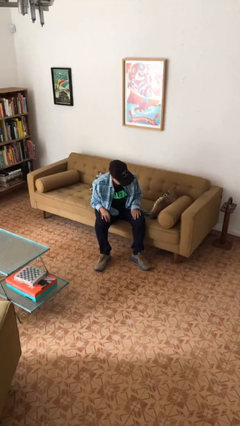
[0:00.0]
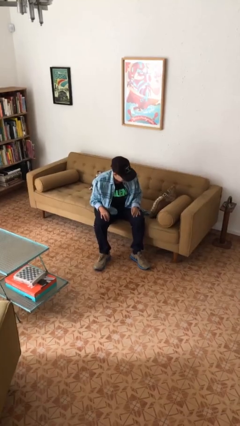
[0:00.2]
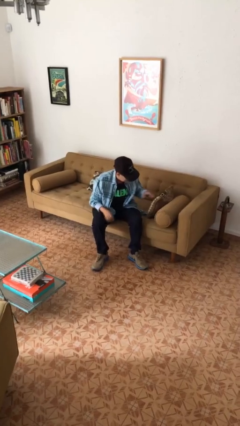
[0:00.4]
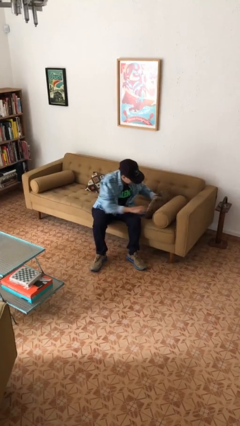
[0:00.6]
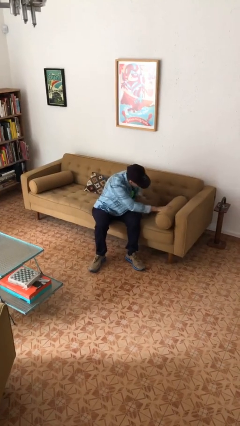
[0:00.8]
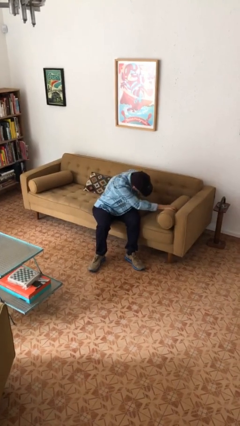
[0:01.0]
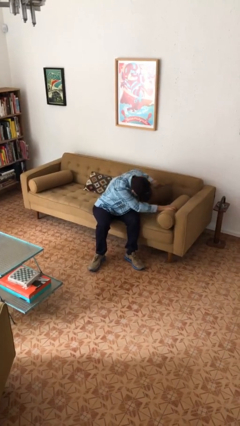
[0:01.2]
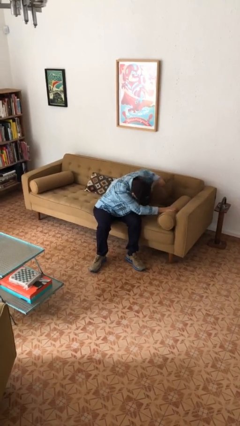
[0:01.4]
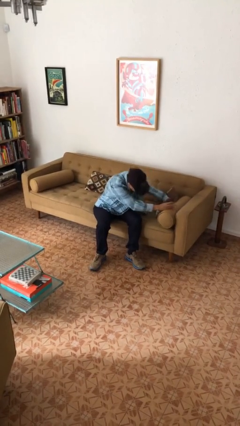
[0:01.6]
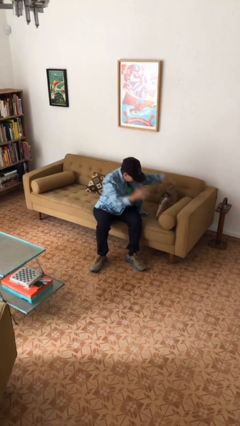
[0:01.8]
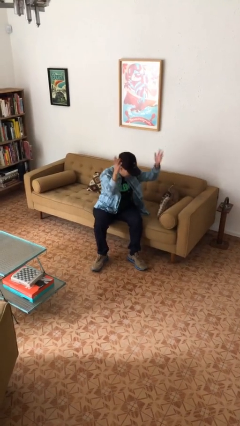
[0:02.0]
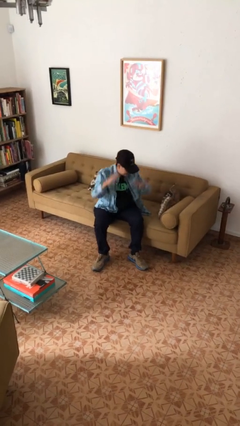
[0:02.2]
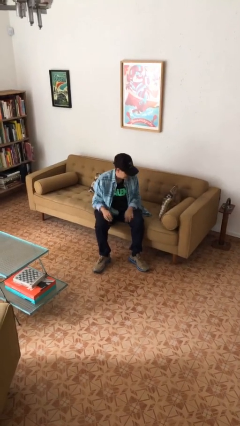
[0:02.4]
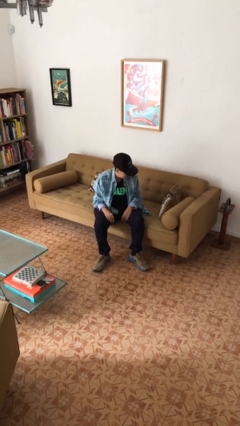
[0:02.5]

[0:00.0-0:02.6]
person searches in couch

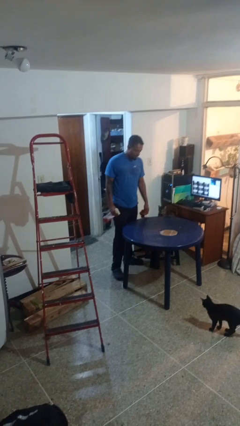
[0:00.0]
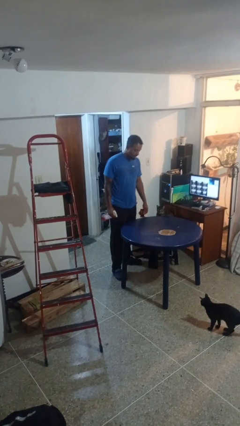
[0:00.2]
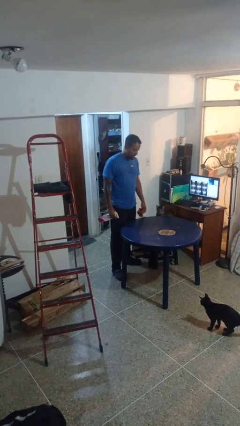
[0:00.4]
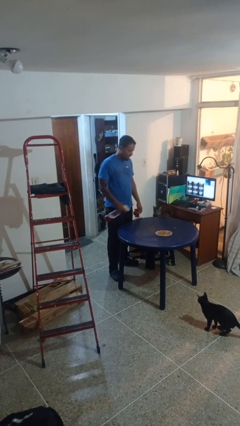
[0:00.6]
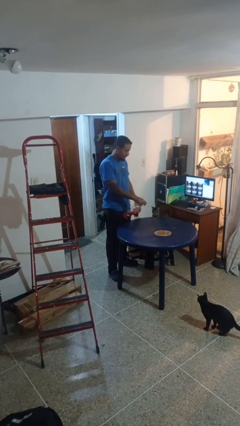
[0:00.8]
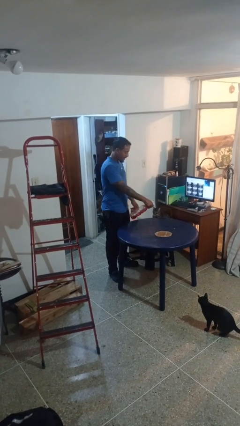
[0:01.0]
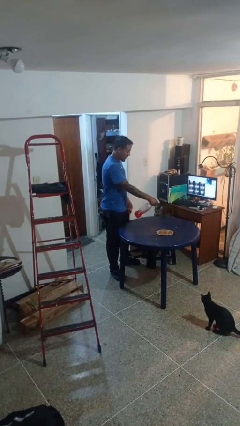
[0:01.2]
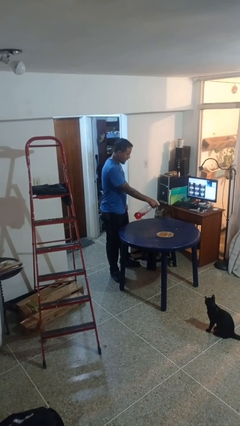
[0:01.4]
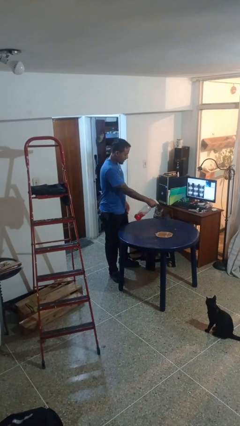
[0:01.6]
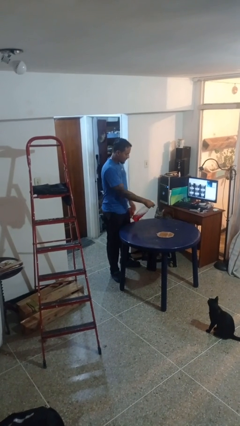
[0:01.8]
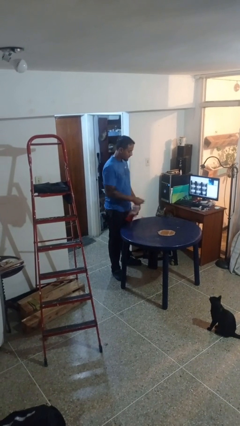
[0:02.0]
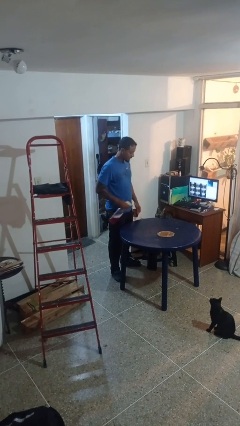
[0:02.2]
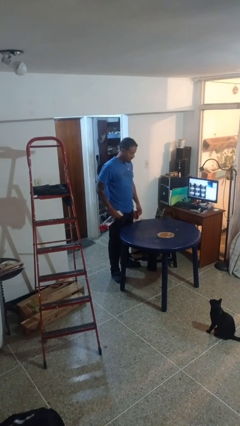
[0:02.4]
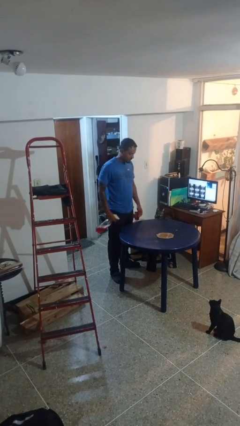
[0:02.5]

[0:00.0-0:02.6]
person sprays from bottle

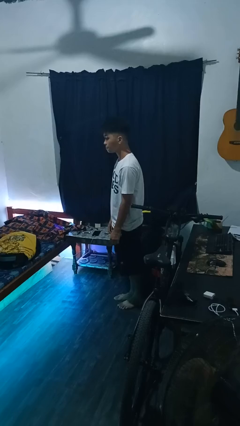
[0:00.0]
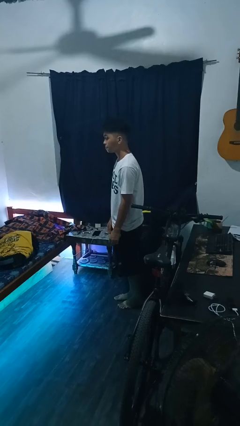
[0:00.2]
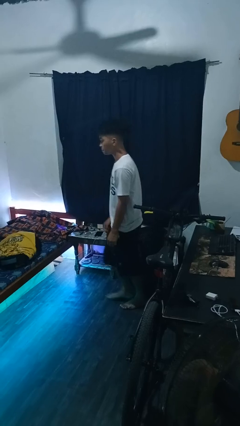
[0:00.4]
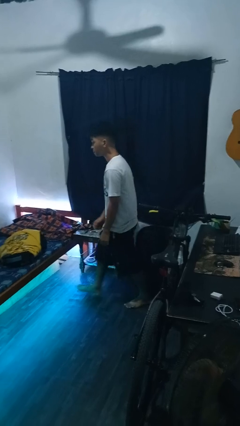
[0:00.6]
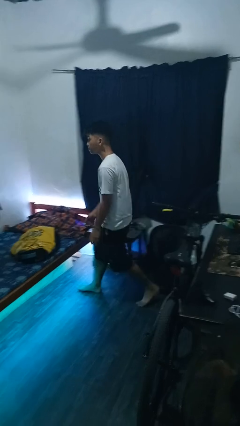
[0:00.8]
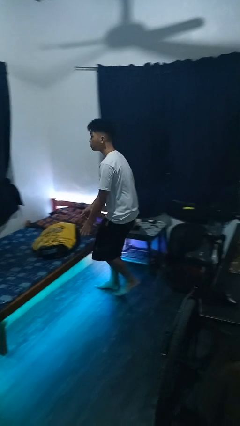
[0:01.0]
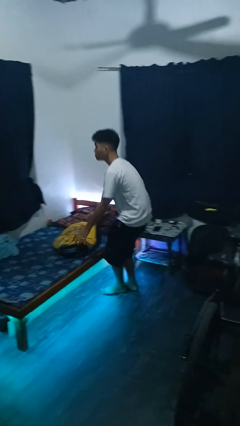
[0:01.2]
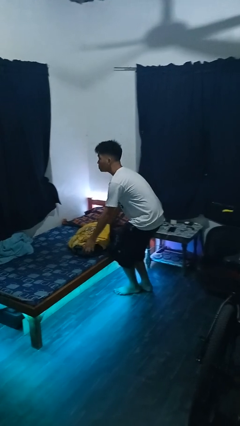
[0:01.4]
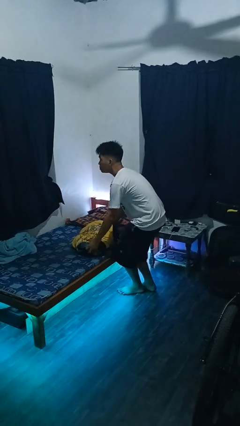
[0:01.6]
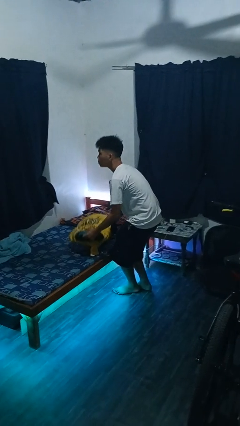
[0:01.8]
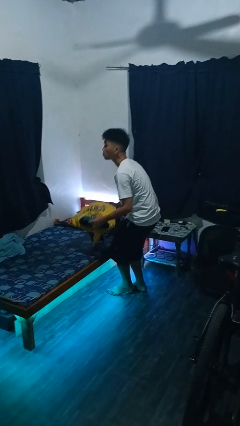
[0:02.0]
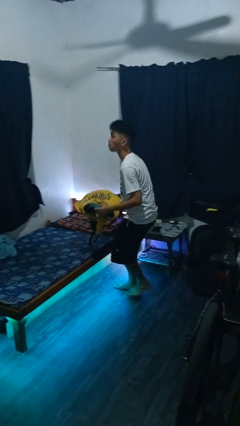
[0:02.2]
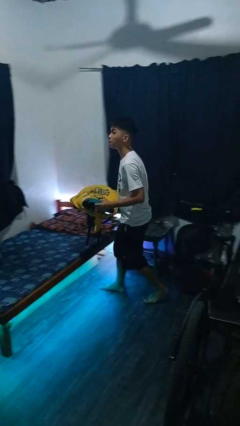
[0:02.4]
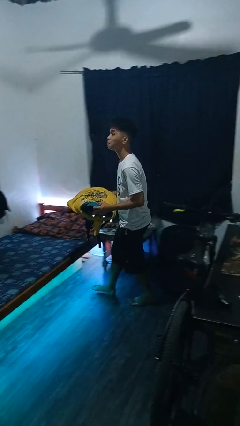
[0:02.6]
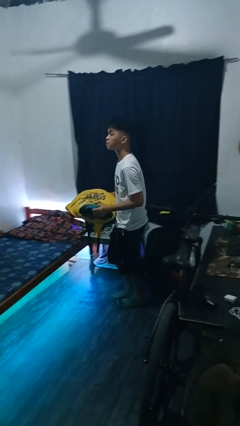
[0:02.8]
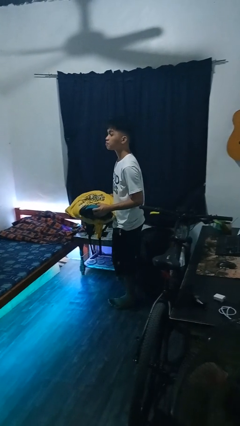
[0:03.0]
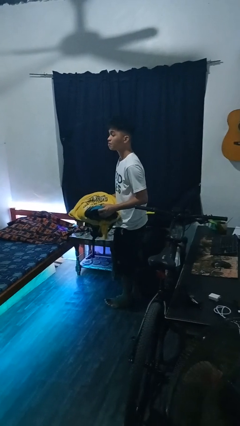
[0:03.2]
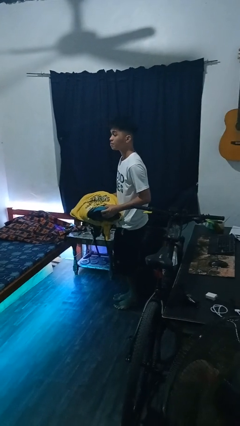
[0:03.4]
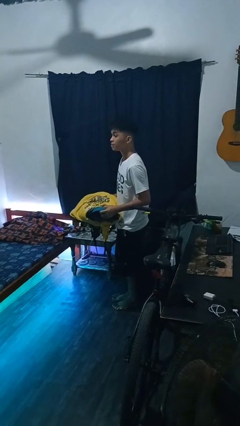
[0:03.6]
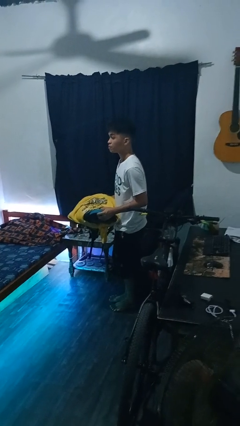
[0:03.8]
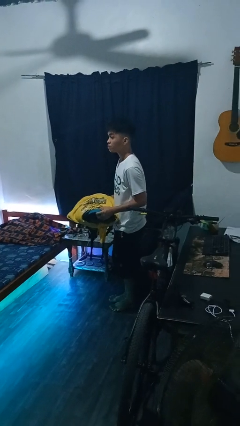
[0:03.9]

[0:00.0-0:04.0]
person picks up object from bed

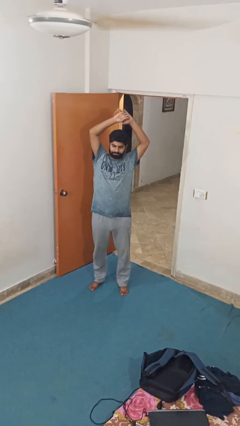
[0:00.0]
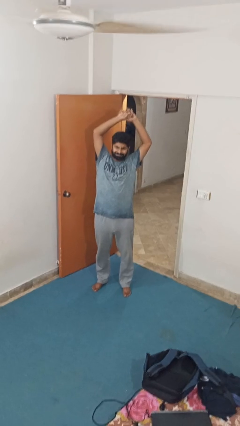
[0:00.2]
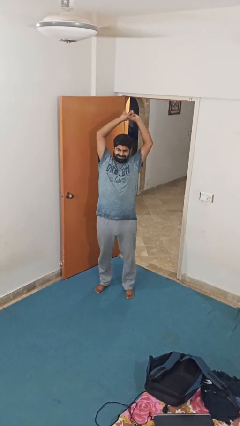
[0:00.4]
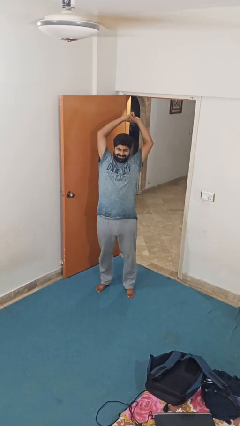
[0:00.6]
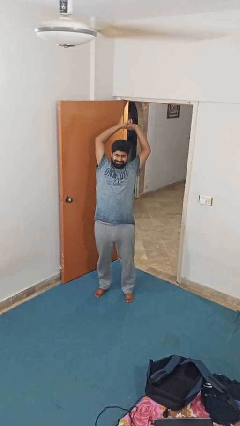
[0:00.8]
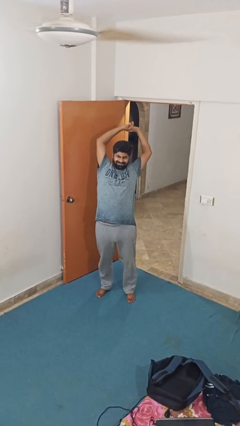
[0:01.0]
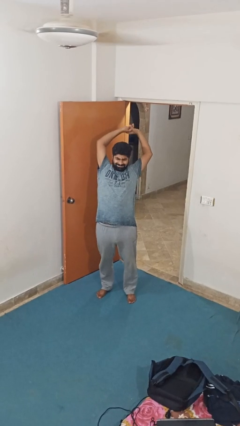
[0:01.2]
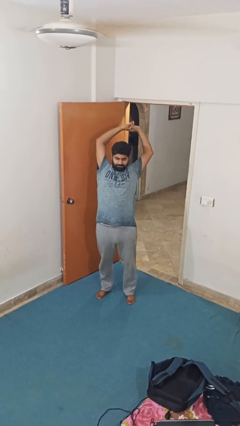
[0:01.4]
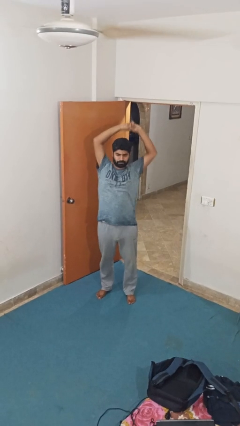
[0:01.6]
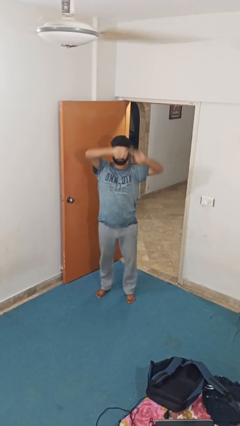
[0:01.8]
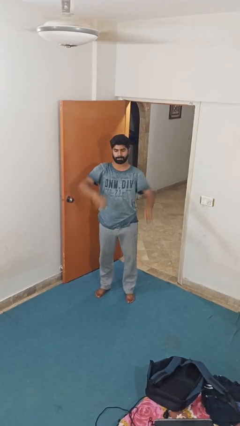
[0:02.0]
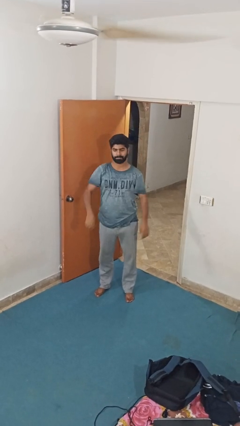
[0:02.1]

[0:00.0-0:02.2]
person stretches arms over head

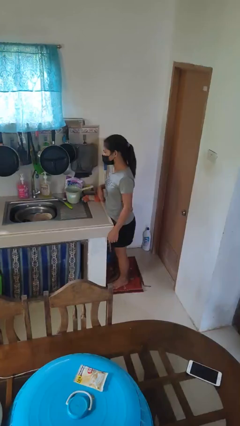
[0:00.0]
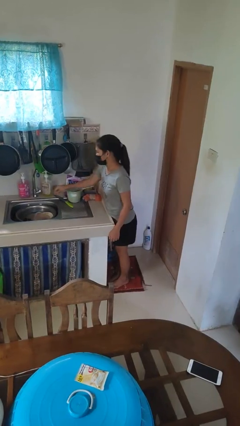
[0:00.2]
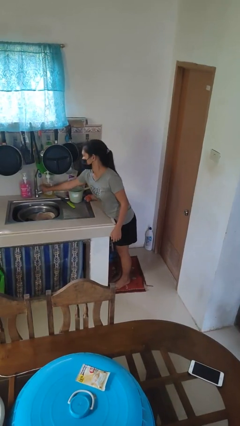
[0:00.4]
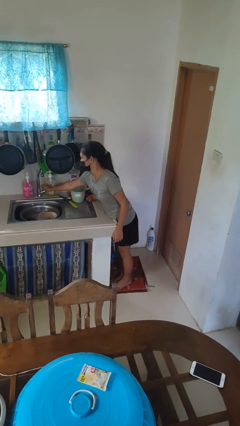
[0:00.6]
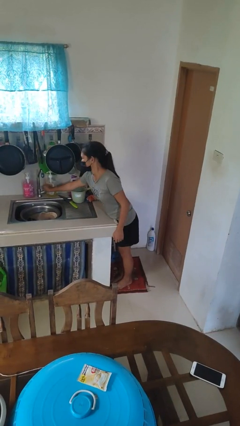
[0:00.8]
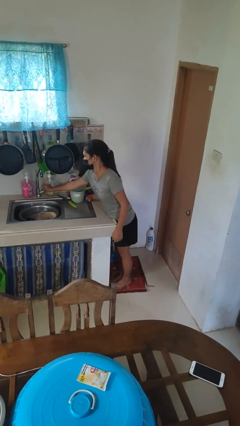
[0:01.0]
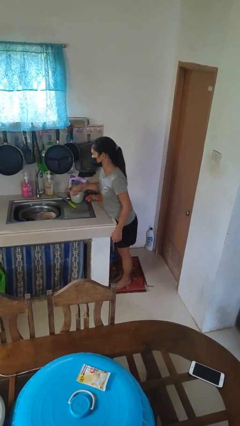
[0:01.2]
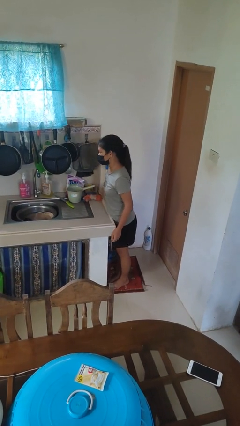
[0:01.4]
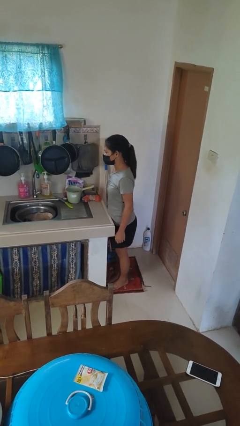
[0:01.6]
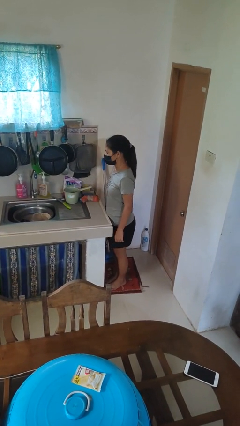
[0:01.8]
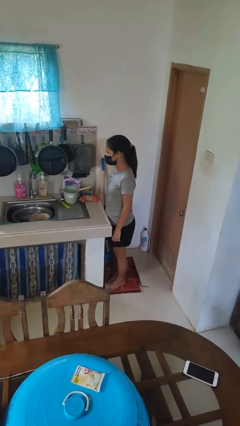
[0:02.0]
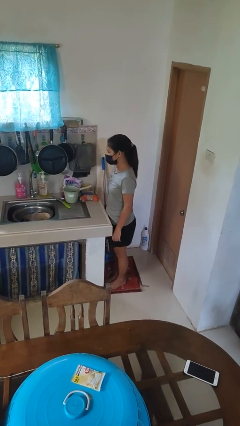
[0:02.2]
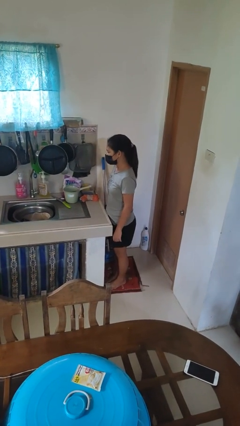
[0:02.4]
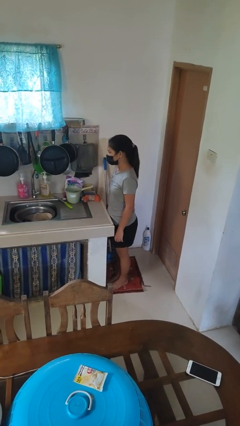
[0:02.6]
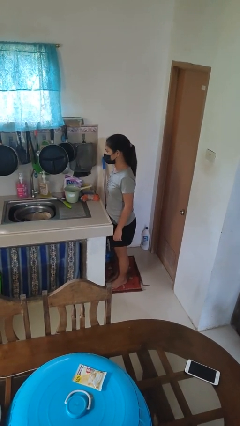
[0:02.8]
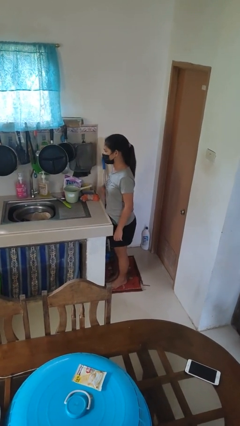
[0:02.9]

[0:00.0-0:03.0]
person turns on faucet

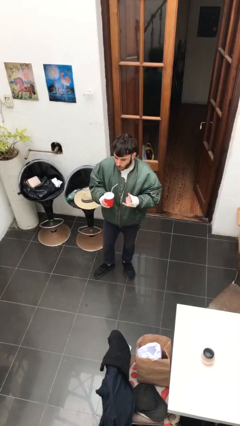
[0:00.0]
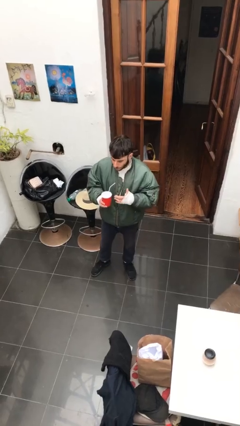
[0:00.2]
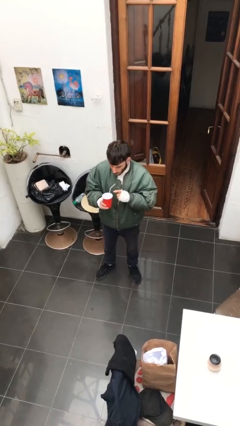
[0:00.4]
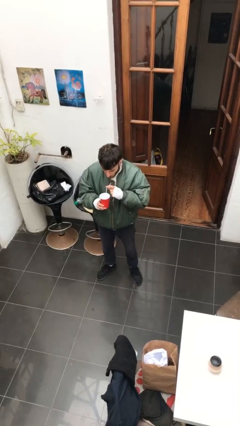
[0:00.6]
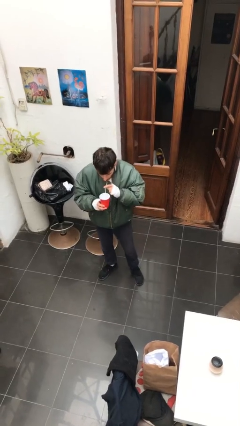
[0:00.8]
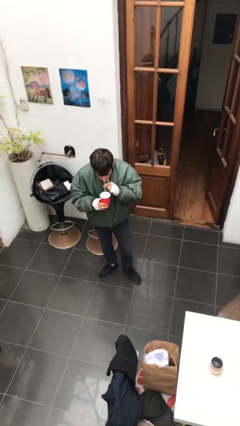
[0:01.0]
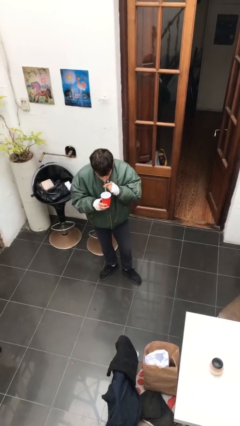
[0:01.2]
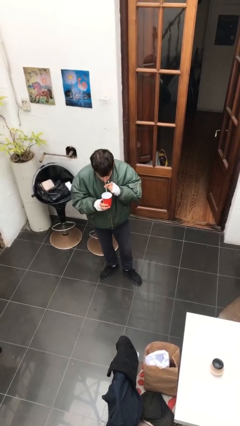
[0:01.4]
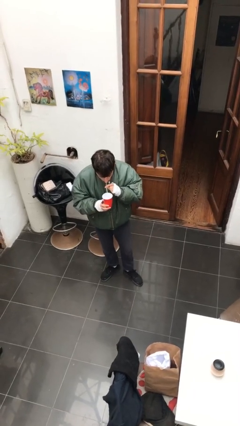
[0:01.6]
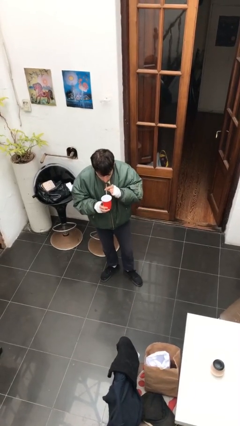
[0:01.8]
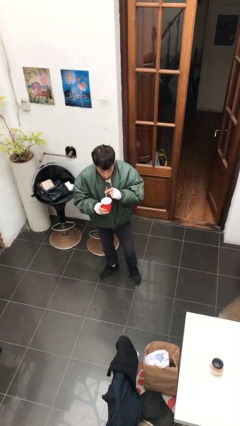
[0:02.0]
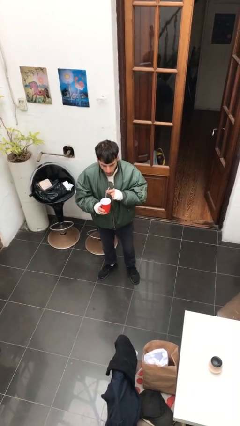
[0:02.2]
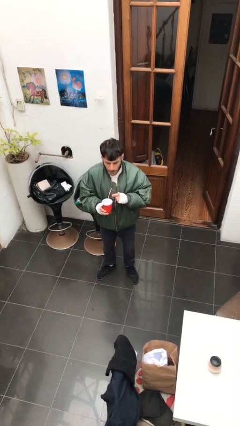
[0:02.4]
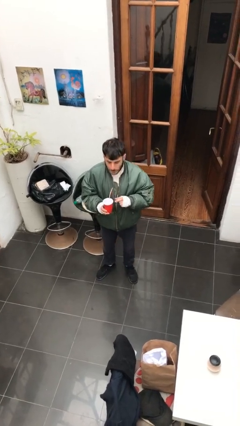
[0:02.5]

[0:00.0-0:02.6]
person drinks from straw

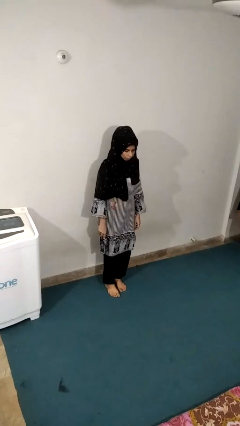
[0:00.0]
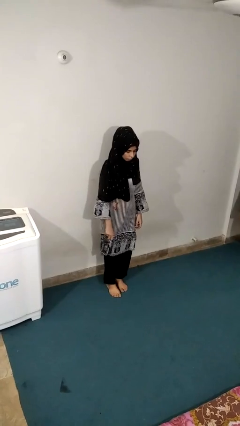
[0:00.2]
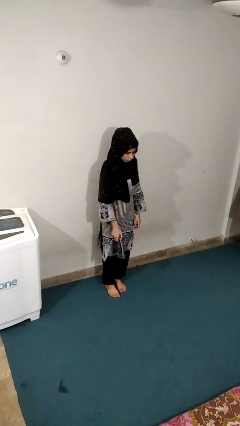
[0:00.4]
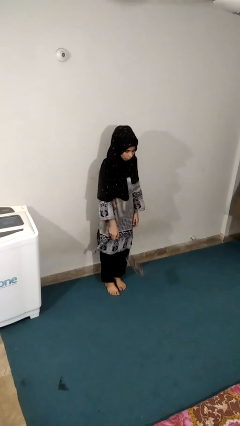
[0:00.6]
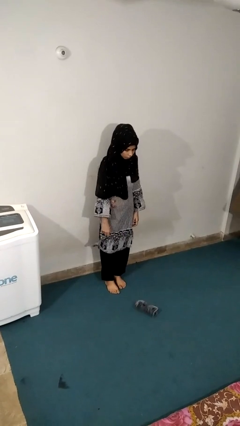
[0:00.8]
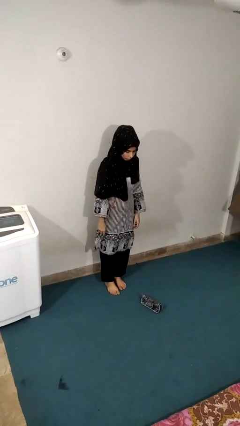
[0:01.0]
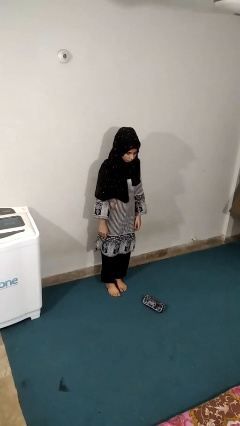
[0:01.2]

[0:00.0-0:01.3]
person throws object to ground
